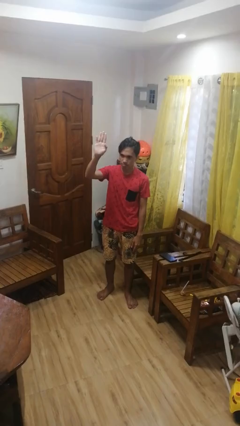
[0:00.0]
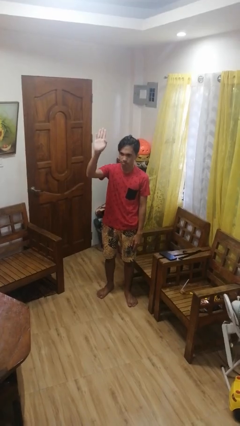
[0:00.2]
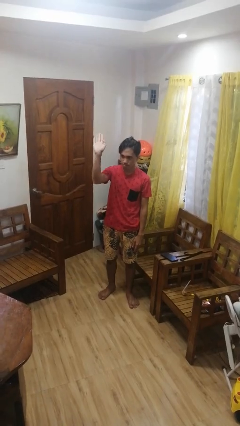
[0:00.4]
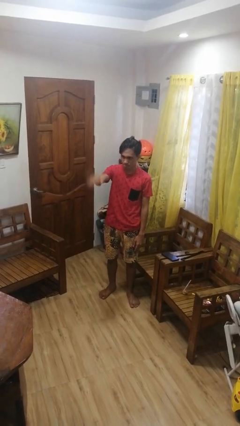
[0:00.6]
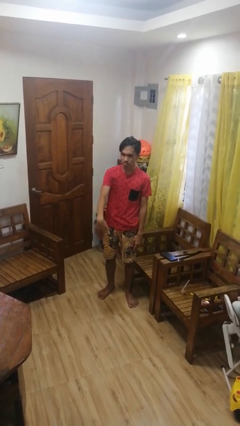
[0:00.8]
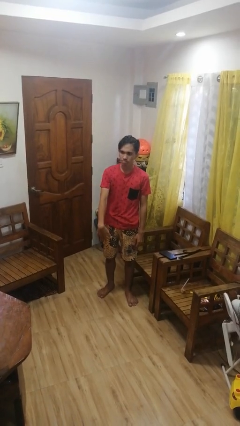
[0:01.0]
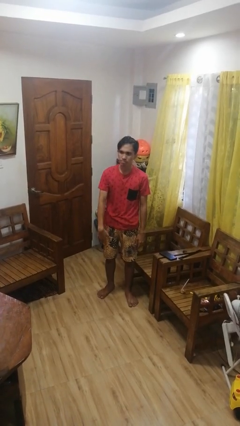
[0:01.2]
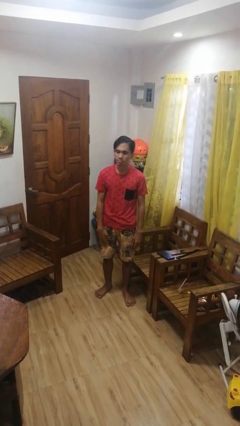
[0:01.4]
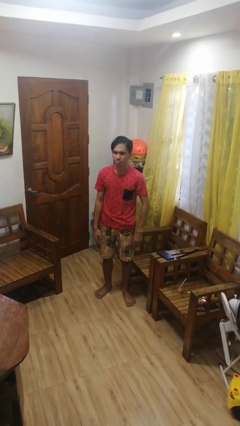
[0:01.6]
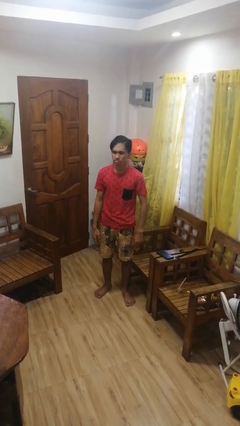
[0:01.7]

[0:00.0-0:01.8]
person gestures swipe down

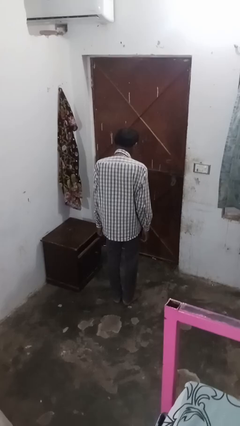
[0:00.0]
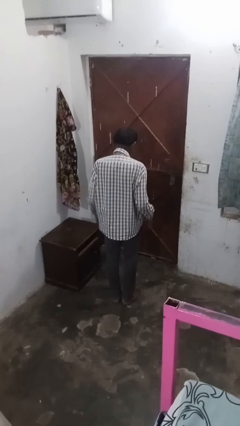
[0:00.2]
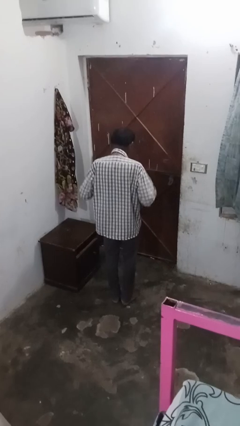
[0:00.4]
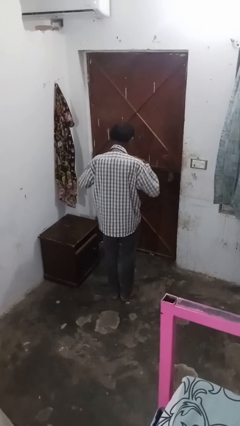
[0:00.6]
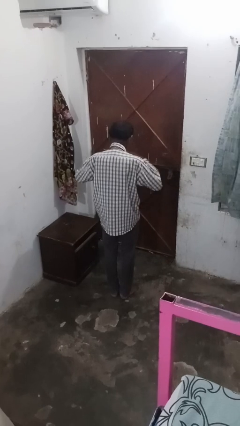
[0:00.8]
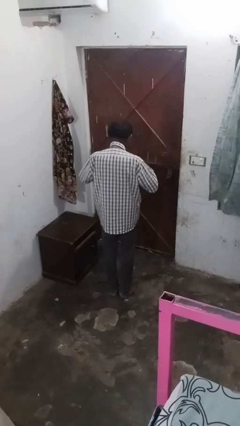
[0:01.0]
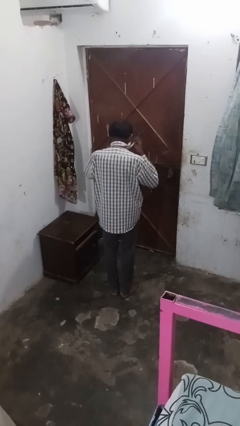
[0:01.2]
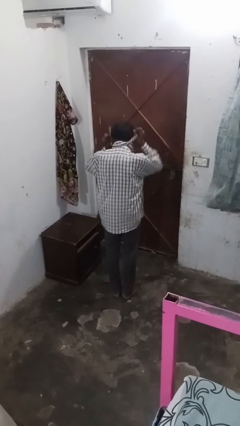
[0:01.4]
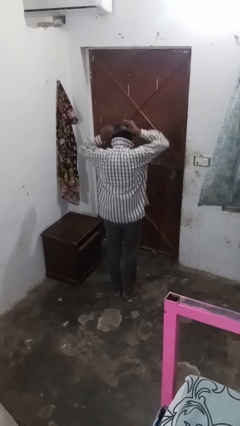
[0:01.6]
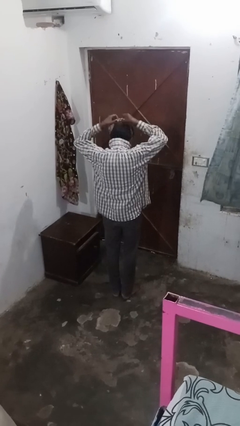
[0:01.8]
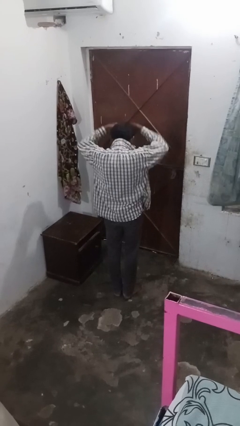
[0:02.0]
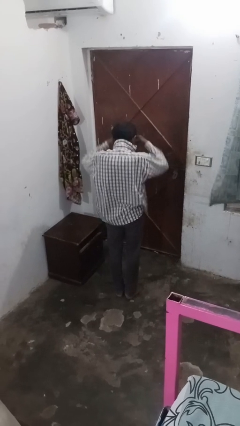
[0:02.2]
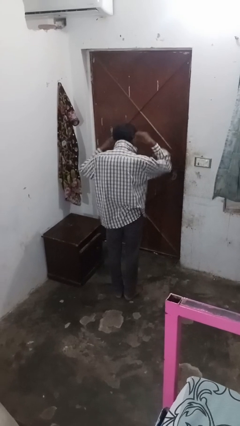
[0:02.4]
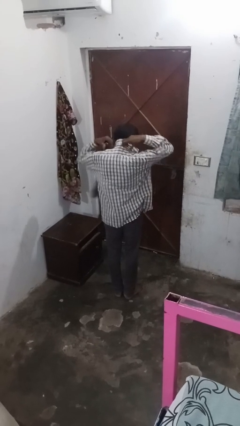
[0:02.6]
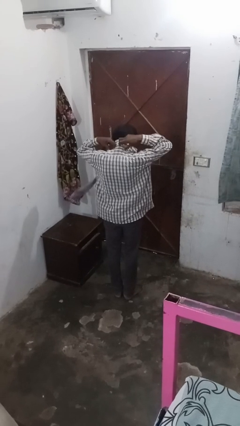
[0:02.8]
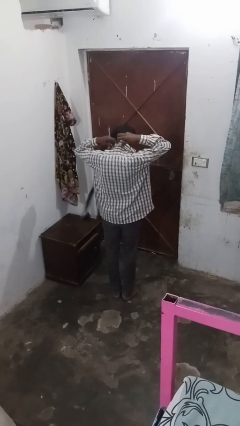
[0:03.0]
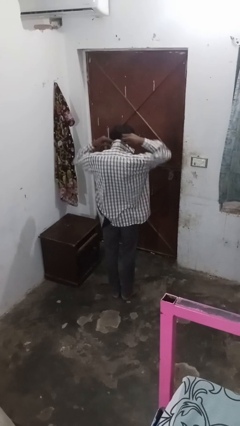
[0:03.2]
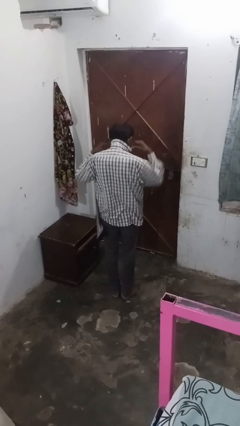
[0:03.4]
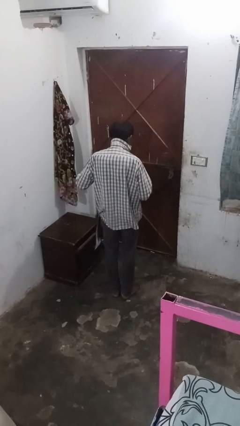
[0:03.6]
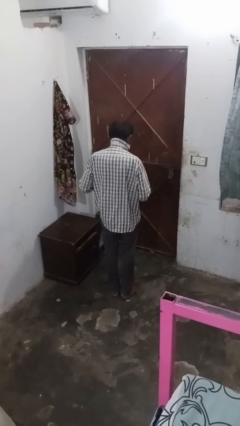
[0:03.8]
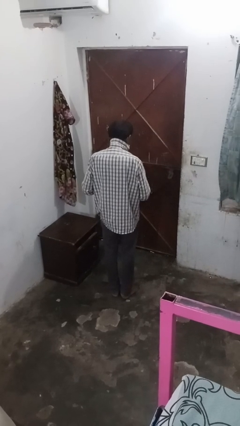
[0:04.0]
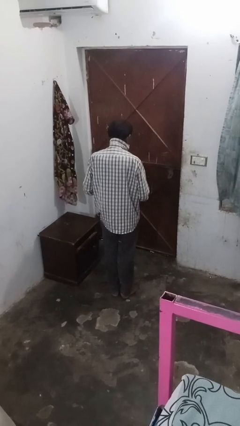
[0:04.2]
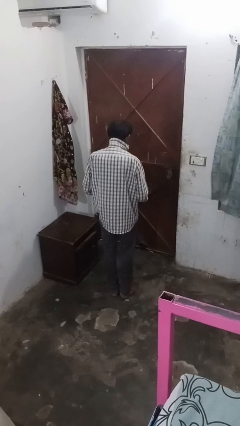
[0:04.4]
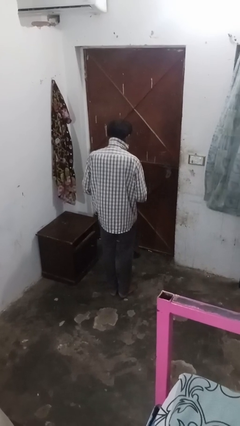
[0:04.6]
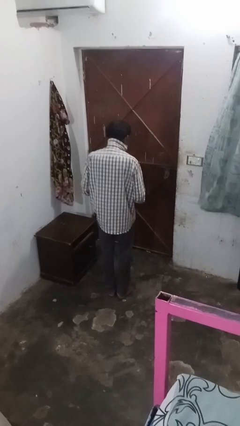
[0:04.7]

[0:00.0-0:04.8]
person takes off necktie

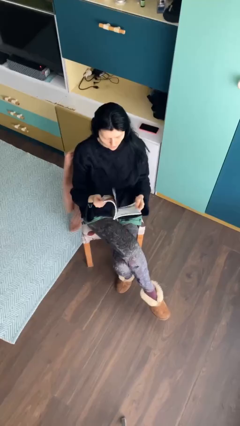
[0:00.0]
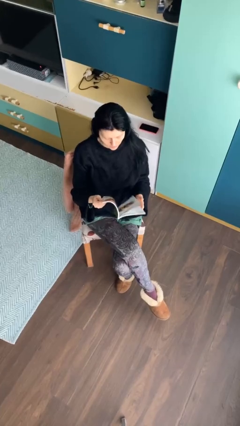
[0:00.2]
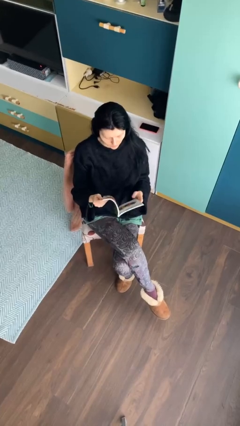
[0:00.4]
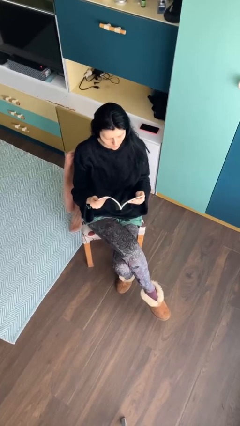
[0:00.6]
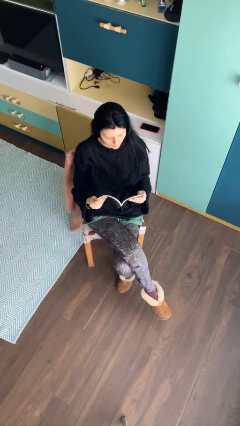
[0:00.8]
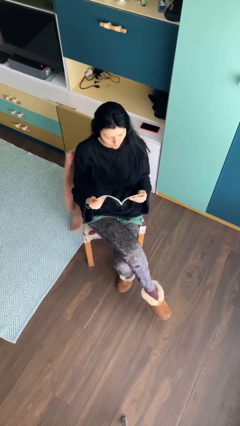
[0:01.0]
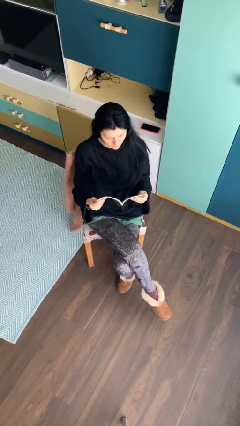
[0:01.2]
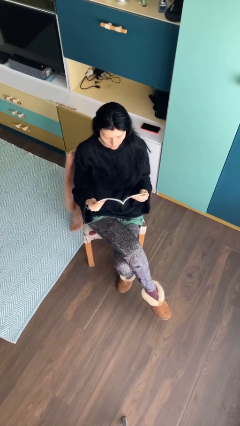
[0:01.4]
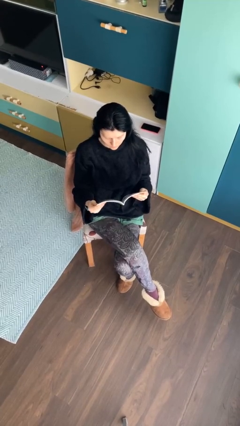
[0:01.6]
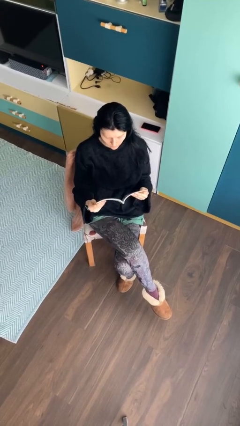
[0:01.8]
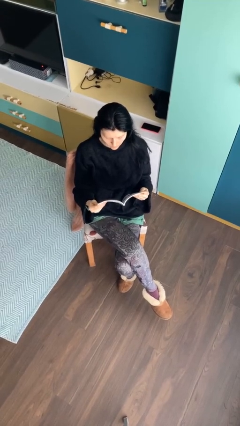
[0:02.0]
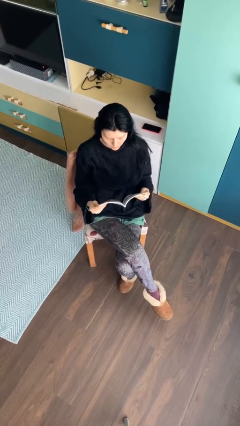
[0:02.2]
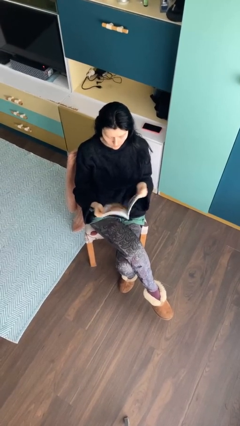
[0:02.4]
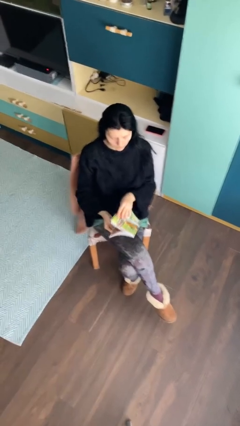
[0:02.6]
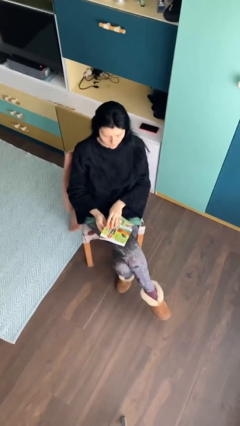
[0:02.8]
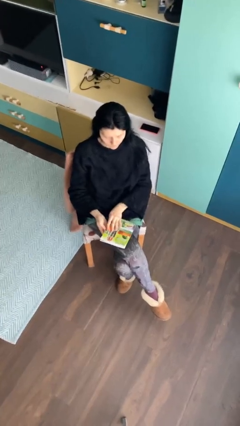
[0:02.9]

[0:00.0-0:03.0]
person reads document

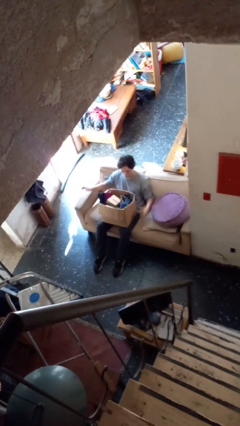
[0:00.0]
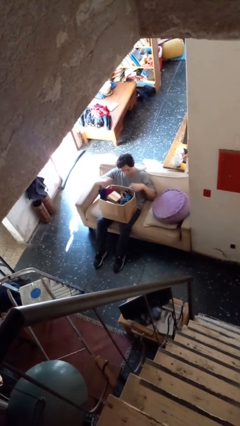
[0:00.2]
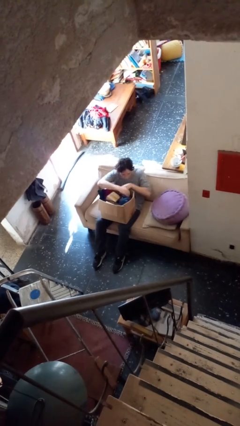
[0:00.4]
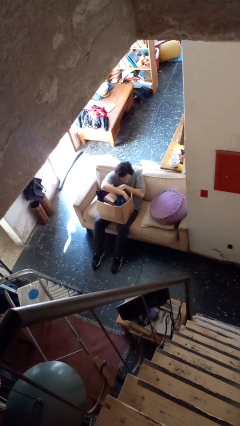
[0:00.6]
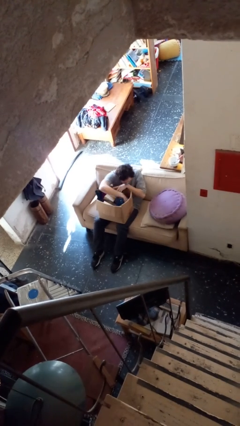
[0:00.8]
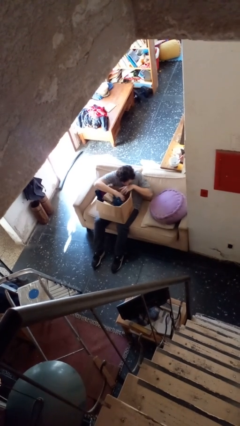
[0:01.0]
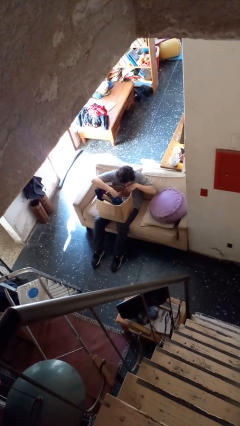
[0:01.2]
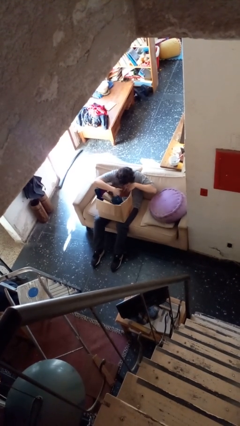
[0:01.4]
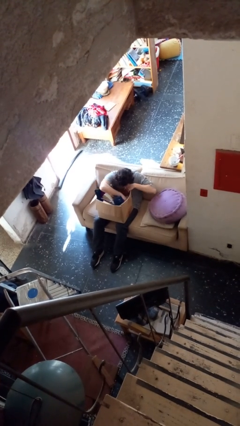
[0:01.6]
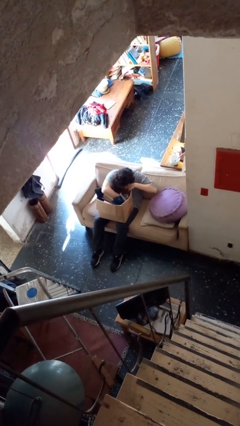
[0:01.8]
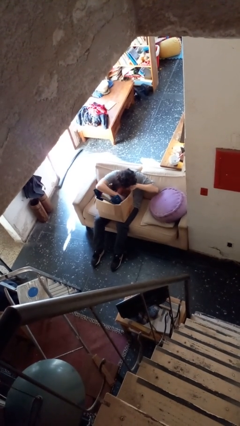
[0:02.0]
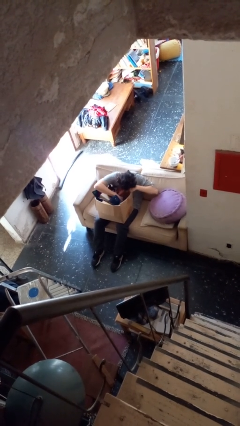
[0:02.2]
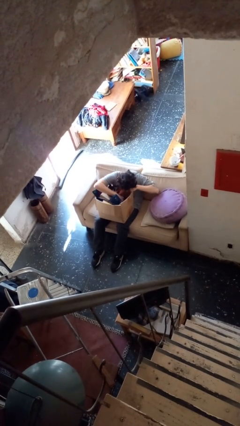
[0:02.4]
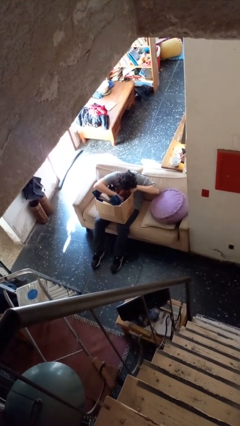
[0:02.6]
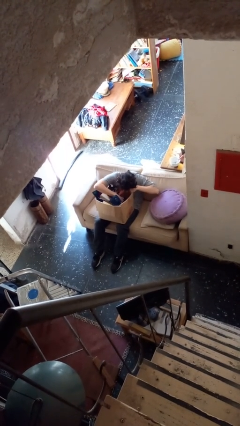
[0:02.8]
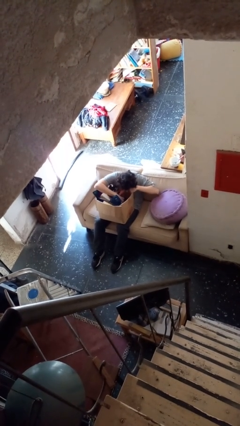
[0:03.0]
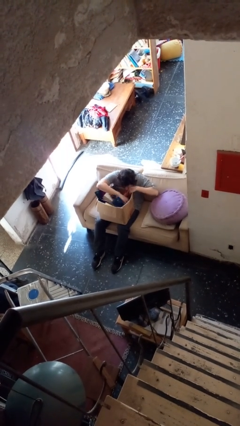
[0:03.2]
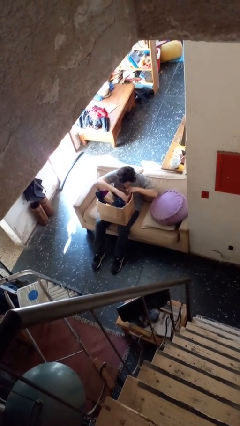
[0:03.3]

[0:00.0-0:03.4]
person searches in box

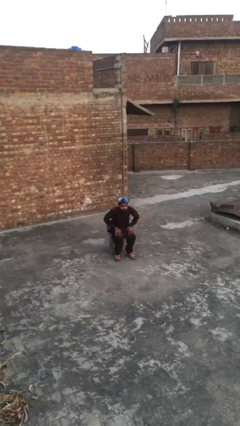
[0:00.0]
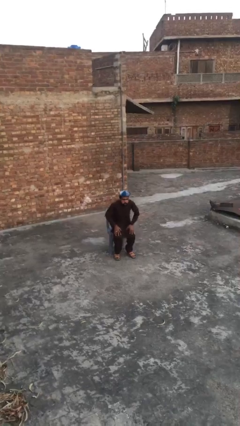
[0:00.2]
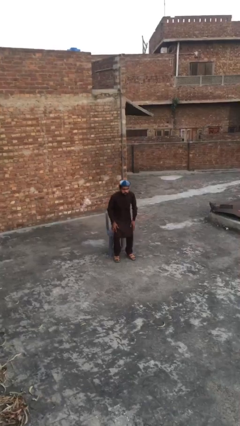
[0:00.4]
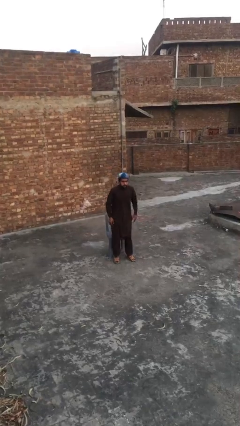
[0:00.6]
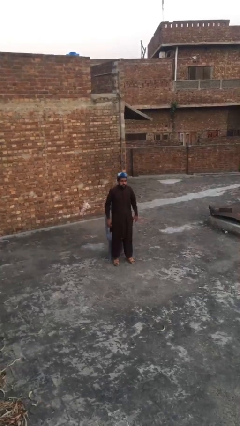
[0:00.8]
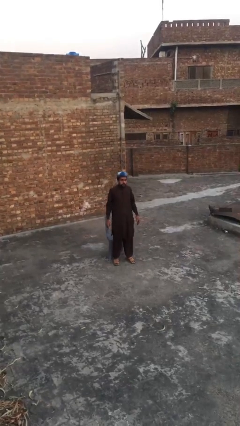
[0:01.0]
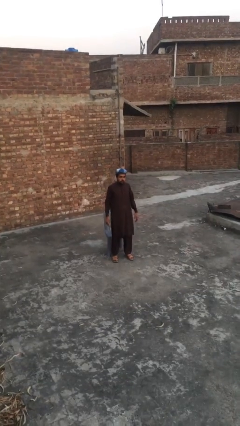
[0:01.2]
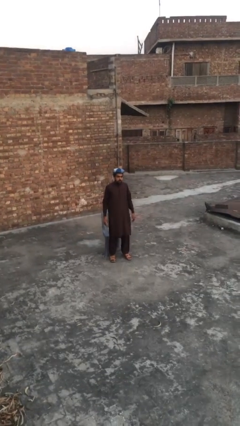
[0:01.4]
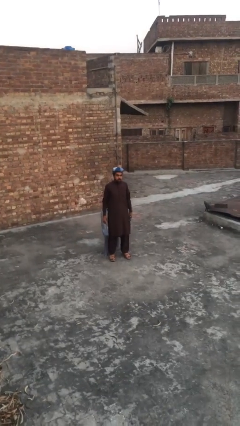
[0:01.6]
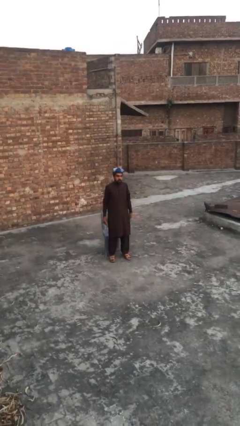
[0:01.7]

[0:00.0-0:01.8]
person stands up

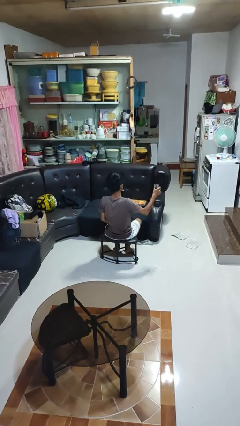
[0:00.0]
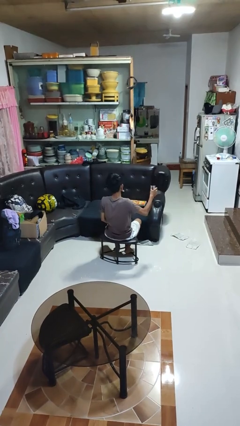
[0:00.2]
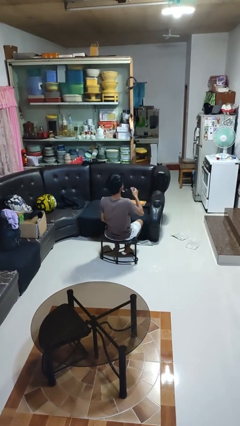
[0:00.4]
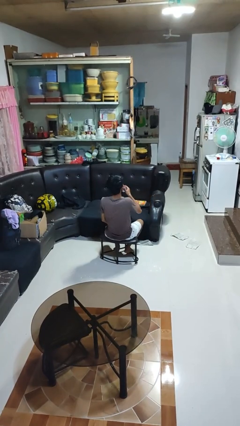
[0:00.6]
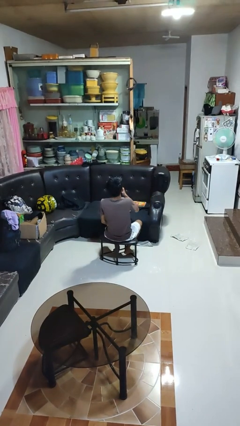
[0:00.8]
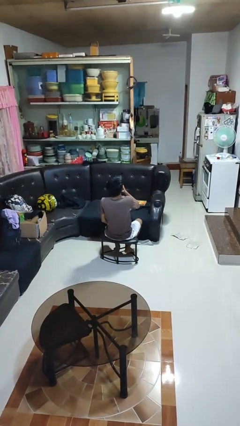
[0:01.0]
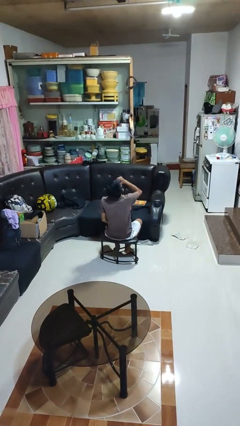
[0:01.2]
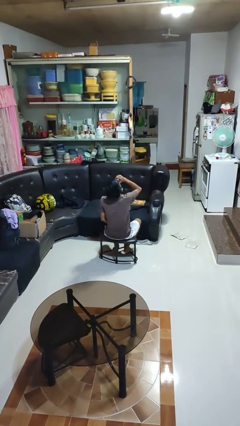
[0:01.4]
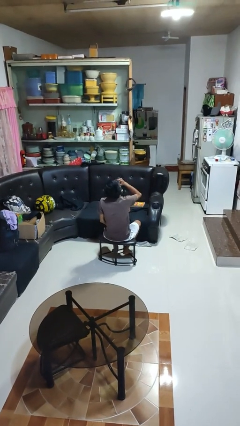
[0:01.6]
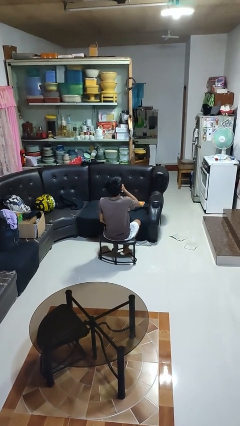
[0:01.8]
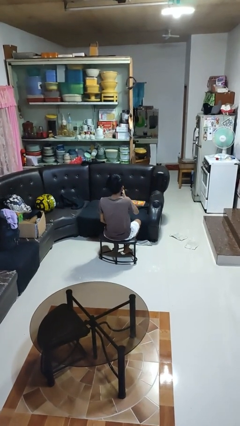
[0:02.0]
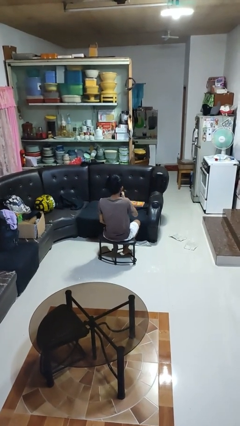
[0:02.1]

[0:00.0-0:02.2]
person drinks from beverage can
